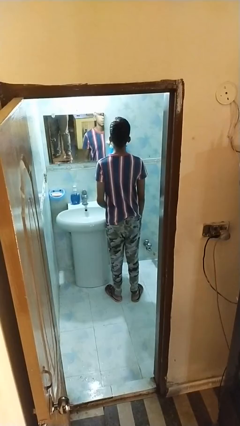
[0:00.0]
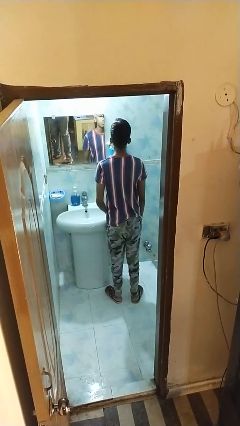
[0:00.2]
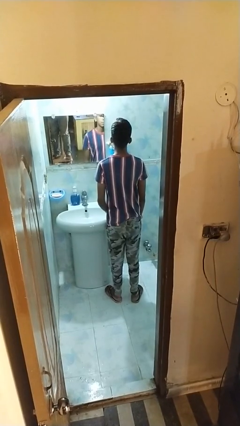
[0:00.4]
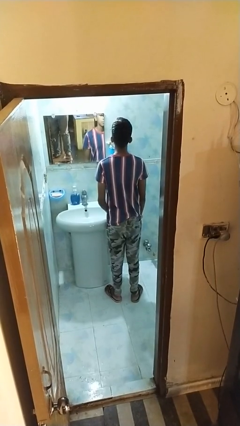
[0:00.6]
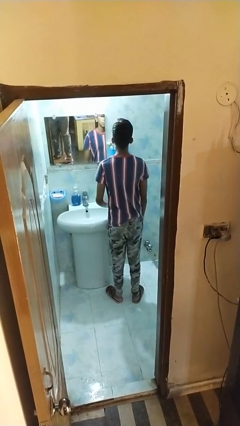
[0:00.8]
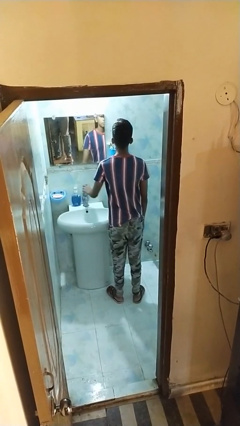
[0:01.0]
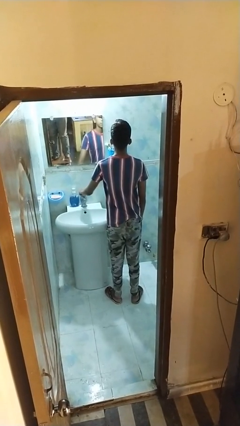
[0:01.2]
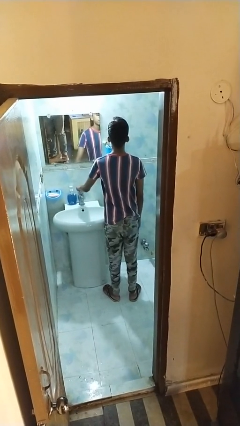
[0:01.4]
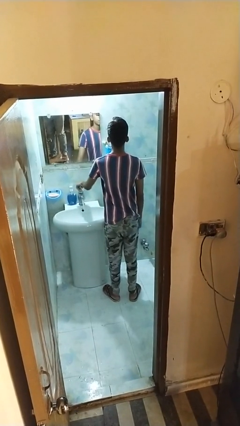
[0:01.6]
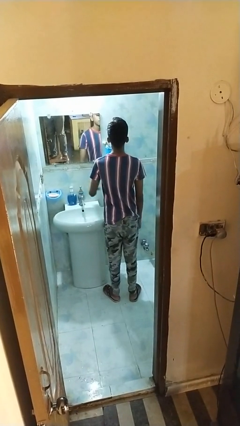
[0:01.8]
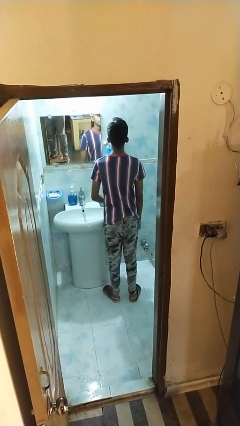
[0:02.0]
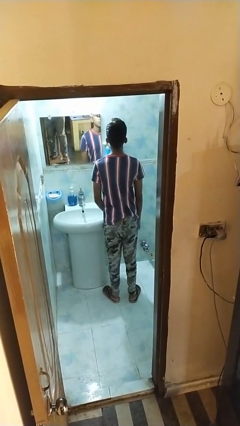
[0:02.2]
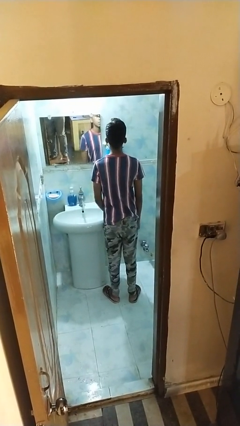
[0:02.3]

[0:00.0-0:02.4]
person turns on faucet

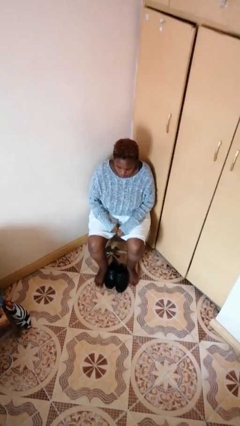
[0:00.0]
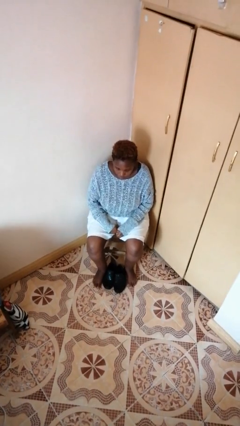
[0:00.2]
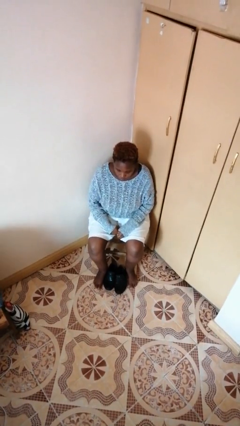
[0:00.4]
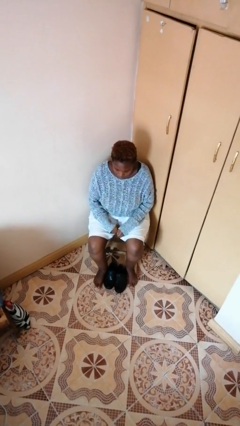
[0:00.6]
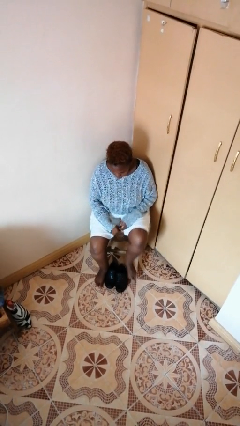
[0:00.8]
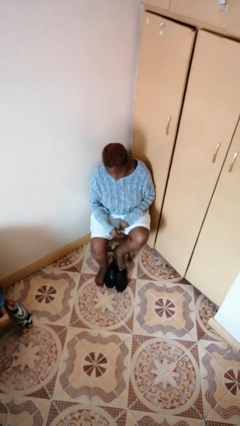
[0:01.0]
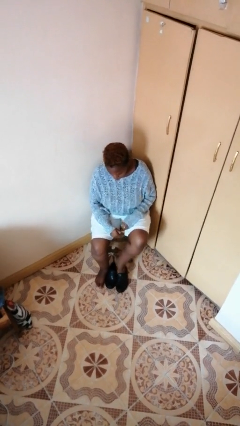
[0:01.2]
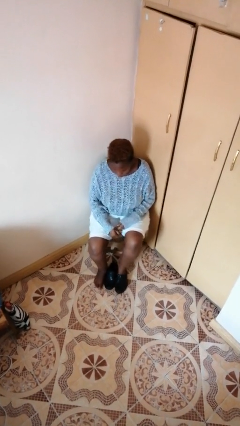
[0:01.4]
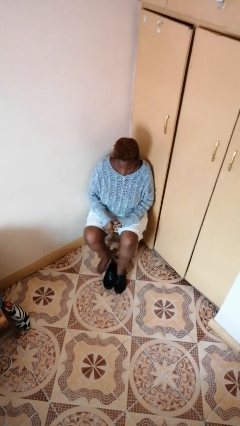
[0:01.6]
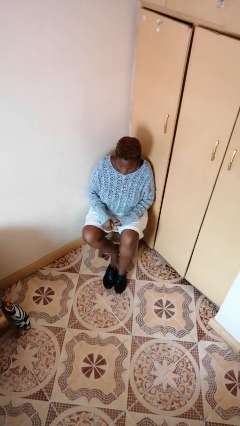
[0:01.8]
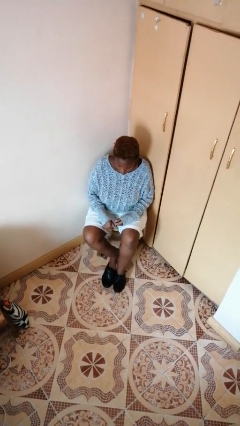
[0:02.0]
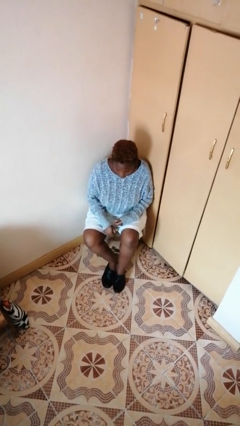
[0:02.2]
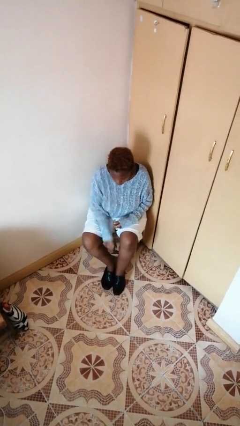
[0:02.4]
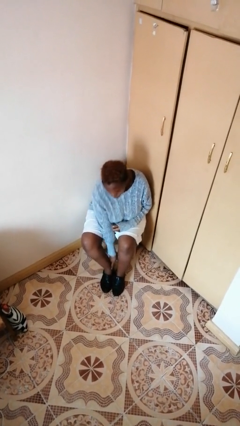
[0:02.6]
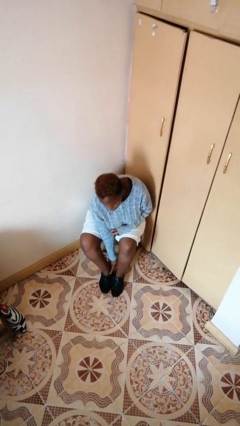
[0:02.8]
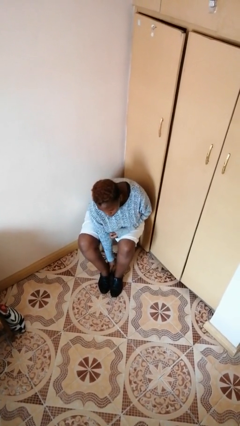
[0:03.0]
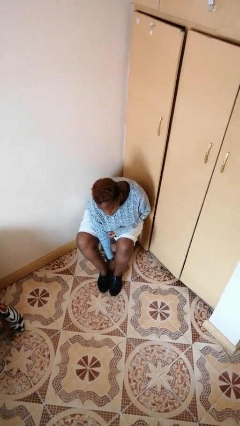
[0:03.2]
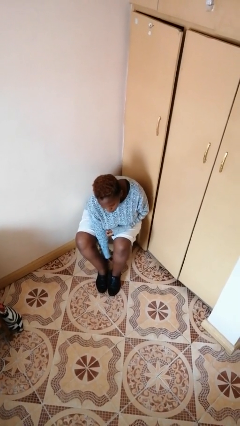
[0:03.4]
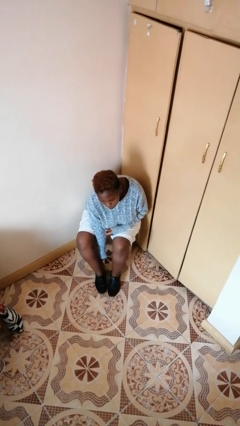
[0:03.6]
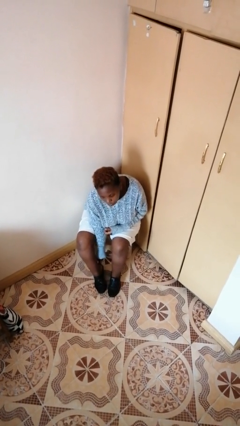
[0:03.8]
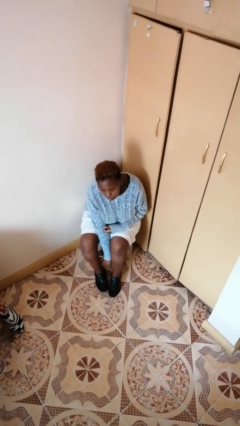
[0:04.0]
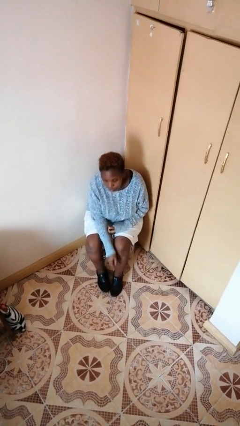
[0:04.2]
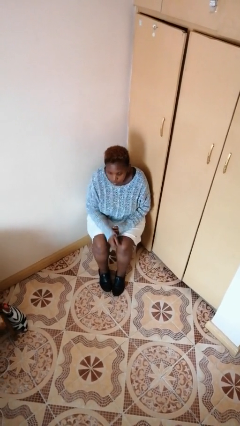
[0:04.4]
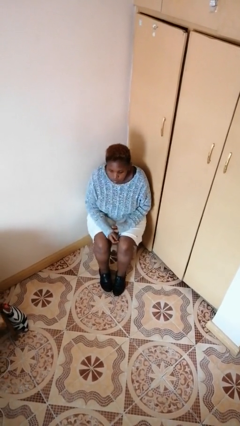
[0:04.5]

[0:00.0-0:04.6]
person puts on shoes

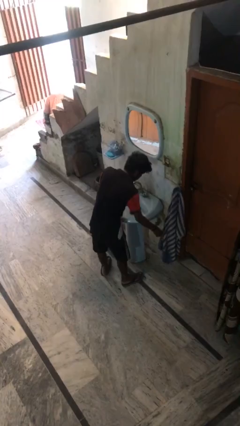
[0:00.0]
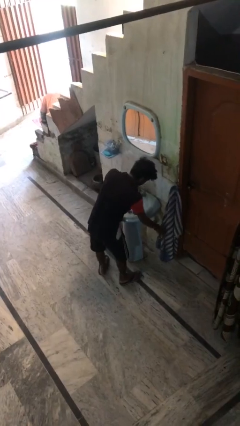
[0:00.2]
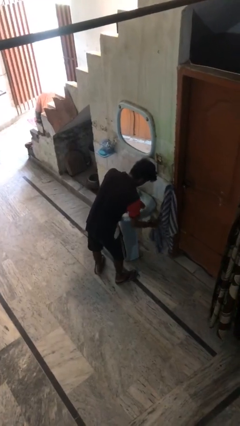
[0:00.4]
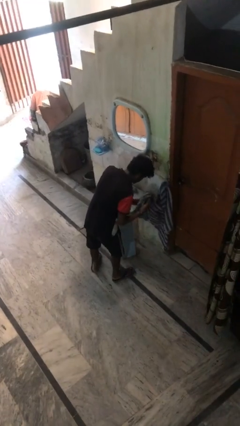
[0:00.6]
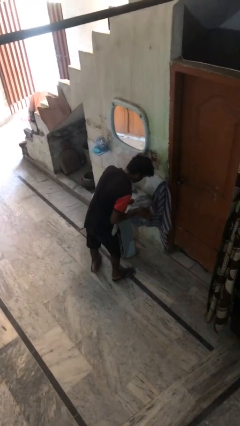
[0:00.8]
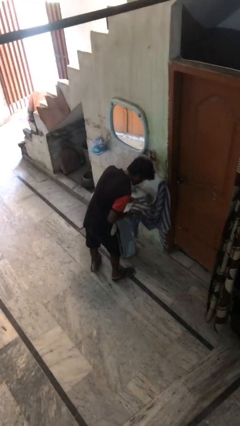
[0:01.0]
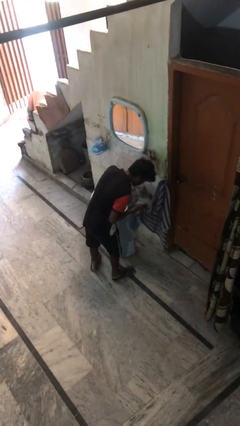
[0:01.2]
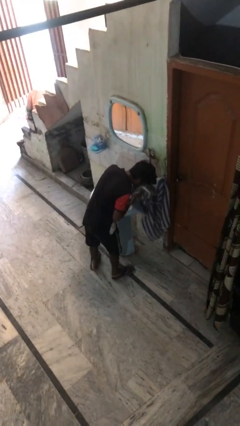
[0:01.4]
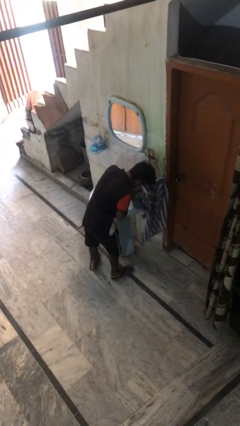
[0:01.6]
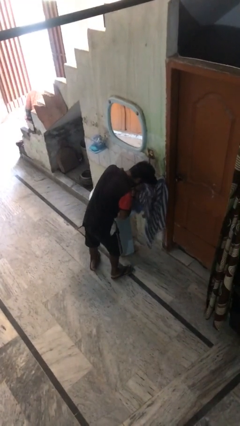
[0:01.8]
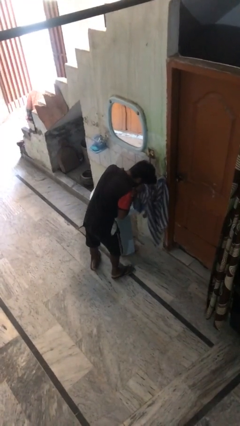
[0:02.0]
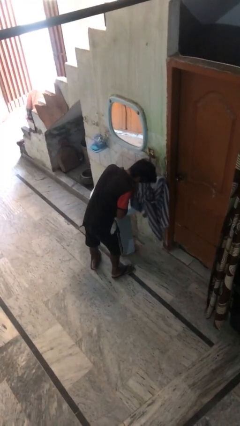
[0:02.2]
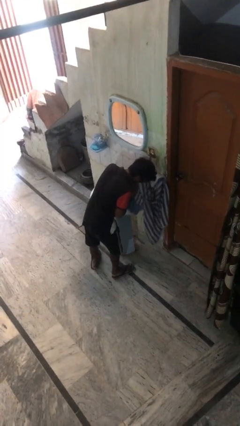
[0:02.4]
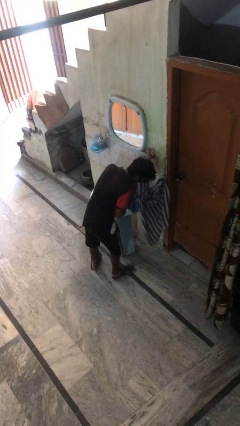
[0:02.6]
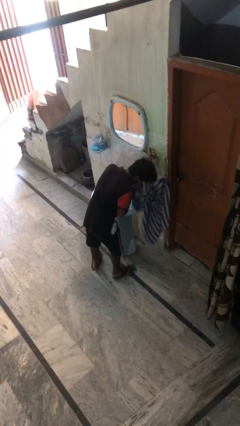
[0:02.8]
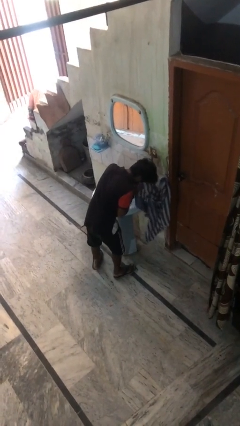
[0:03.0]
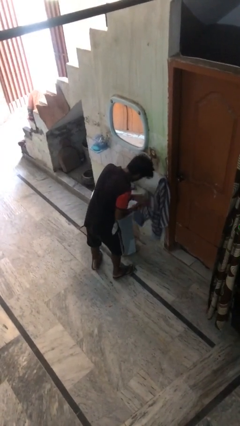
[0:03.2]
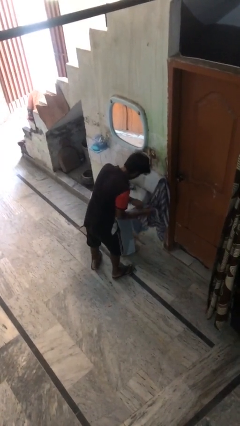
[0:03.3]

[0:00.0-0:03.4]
person dries face with towel

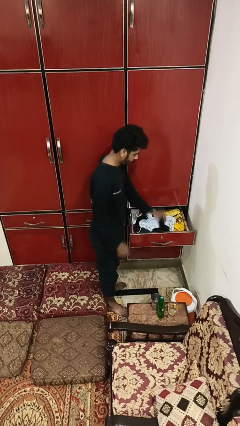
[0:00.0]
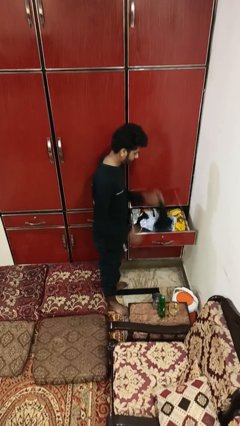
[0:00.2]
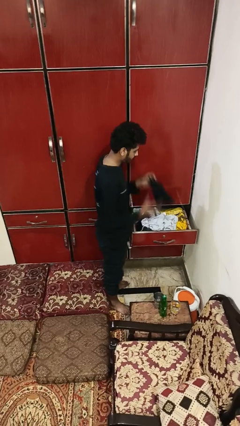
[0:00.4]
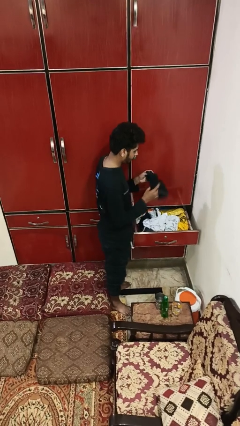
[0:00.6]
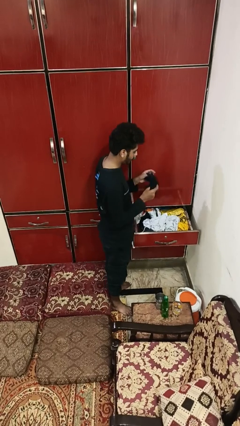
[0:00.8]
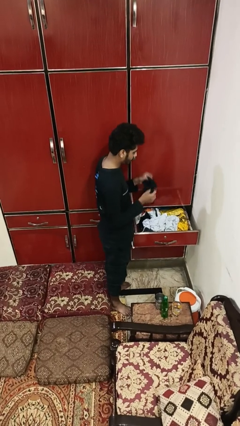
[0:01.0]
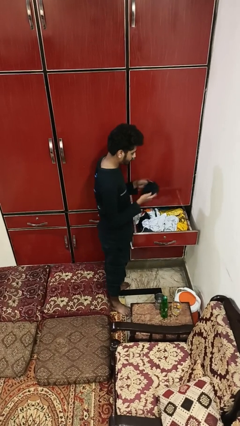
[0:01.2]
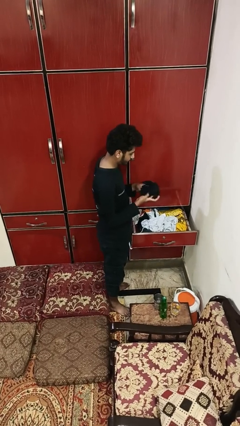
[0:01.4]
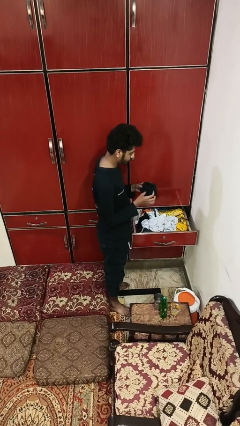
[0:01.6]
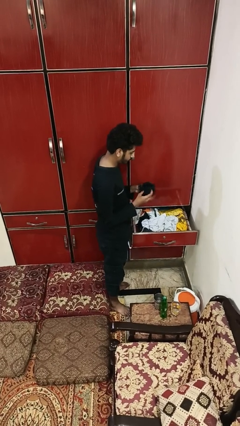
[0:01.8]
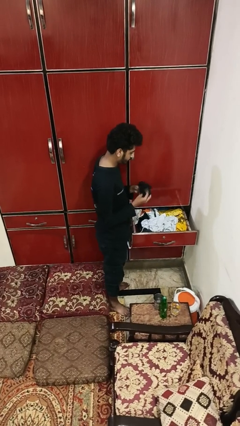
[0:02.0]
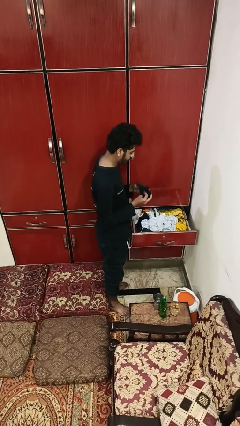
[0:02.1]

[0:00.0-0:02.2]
person takes clothes from dresser

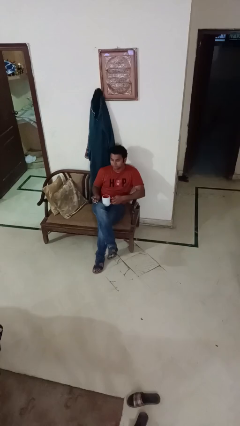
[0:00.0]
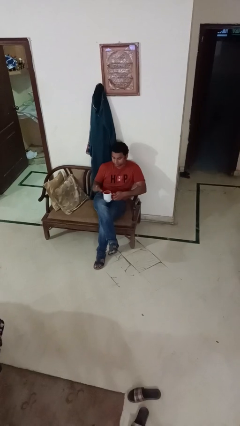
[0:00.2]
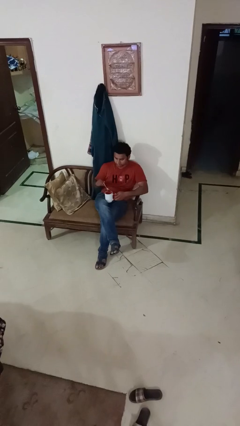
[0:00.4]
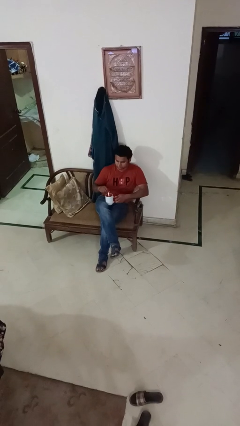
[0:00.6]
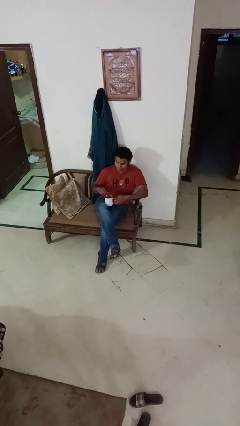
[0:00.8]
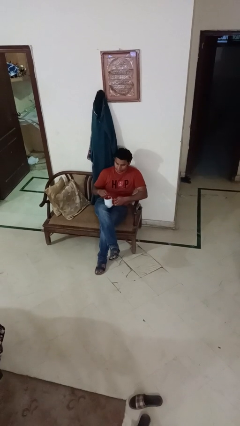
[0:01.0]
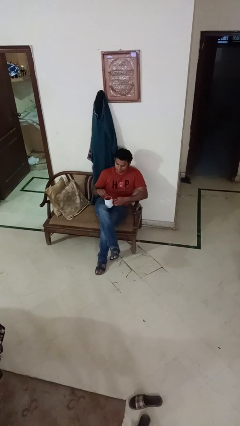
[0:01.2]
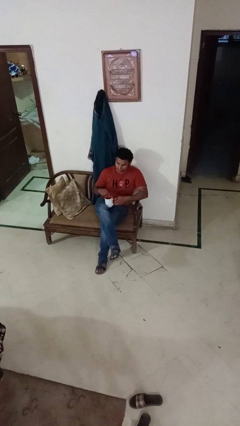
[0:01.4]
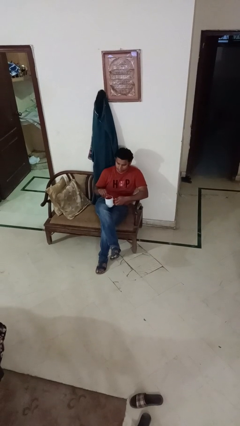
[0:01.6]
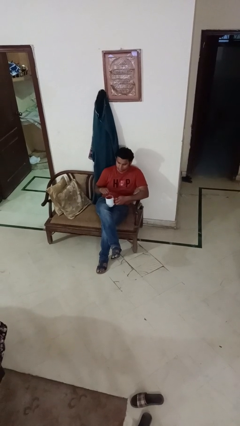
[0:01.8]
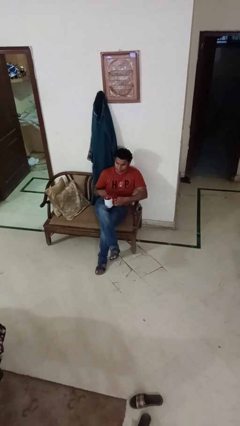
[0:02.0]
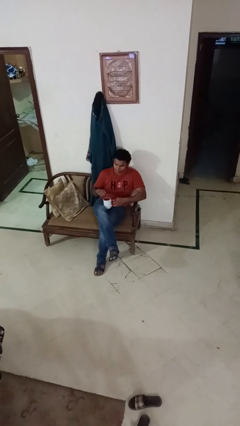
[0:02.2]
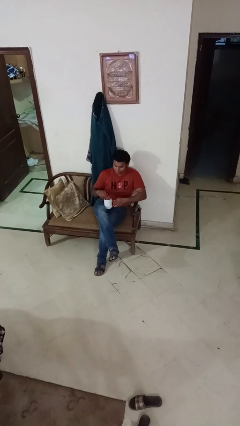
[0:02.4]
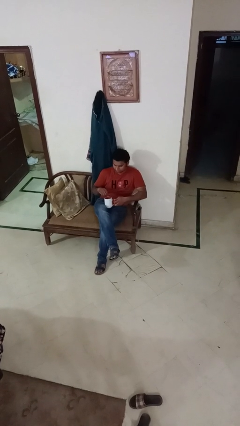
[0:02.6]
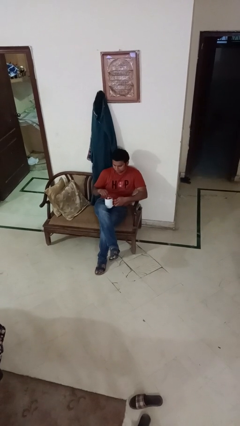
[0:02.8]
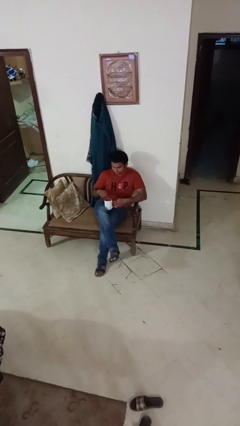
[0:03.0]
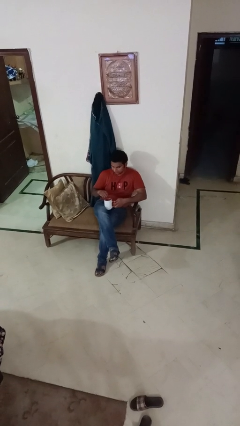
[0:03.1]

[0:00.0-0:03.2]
person stirs mug

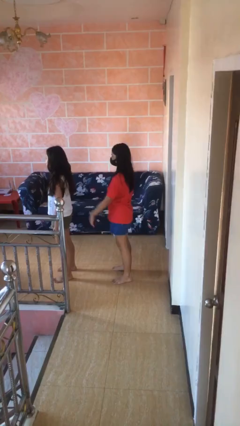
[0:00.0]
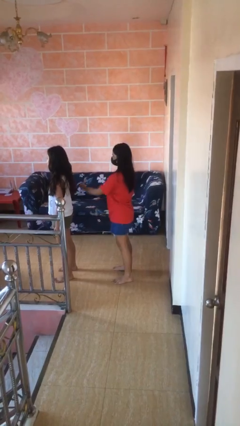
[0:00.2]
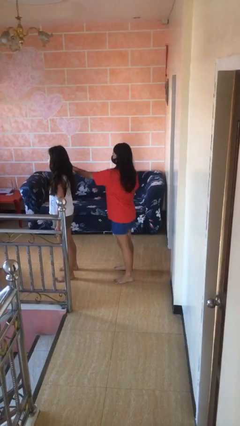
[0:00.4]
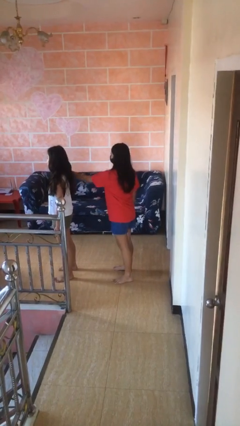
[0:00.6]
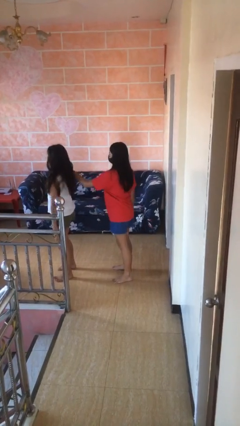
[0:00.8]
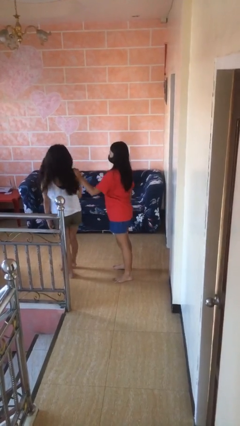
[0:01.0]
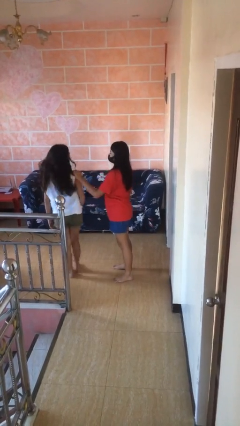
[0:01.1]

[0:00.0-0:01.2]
person grabs person by shoulder

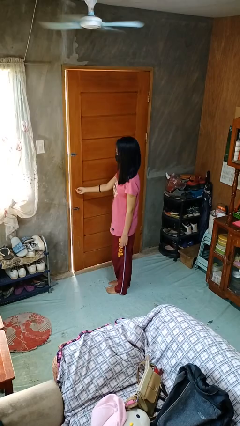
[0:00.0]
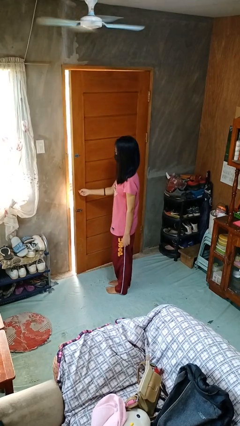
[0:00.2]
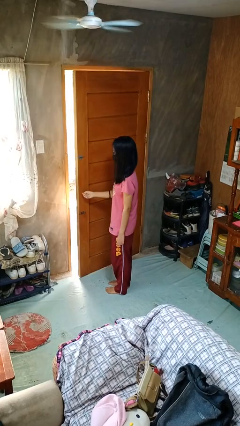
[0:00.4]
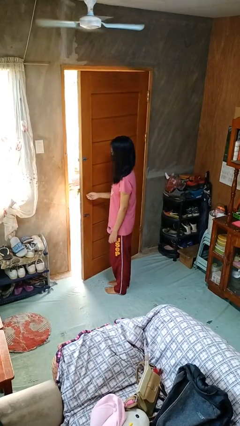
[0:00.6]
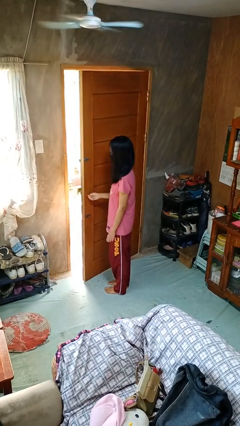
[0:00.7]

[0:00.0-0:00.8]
person opens facility door
